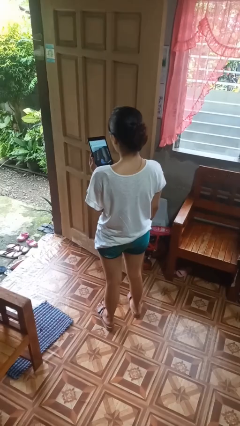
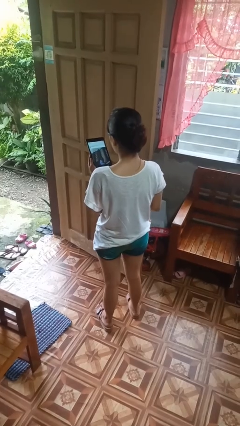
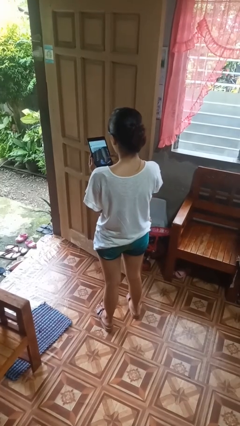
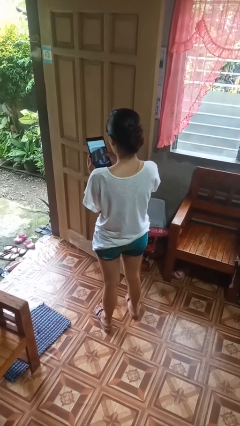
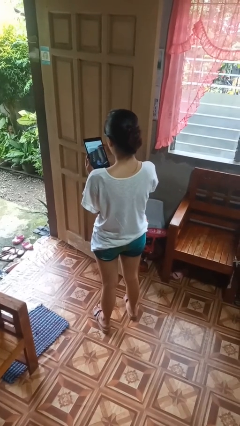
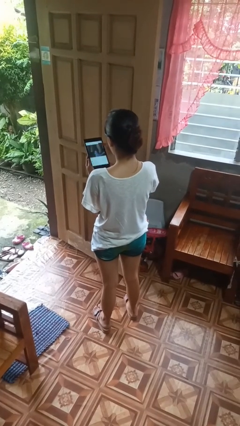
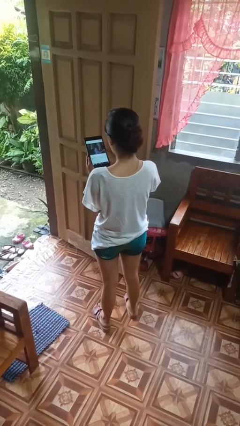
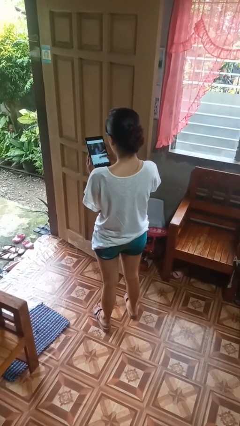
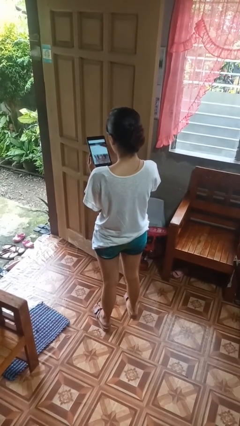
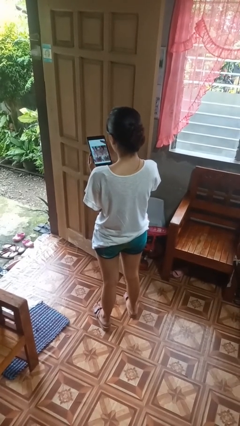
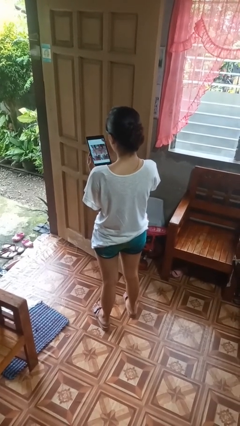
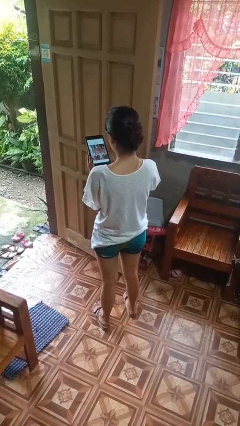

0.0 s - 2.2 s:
person interacts with tablet

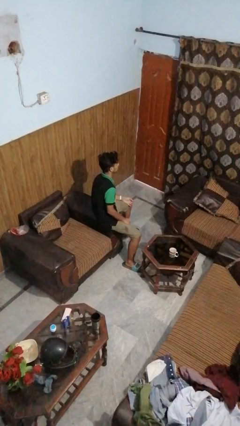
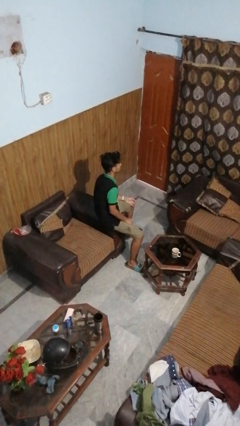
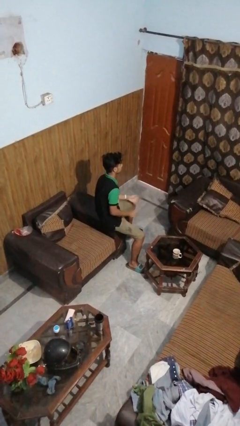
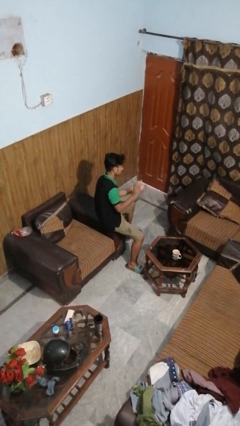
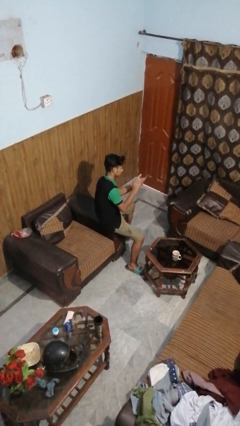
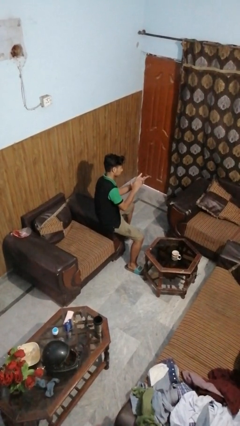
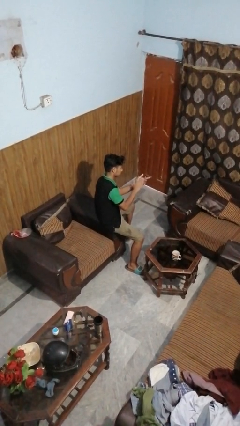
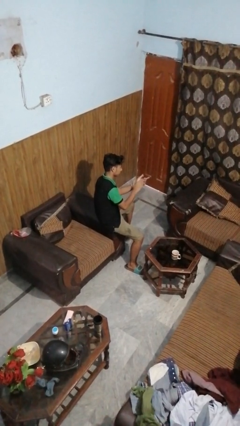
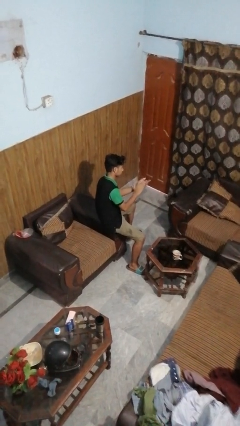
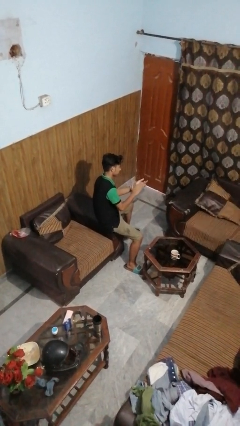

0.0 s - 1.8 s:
person claps hands

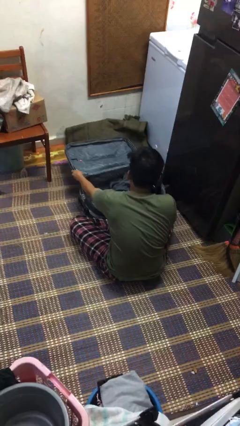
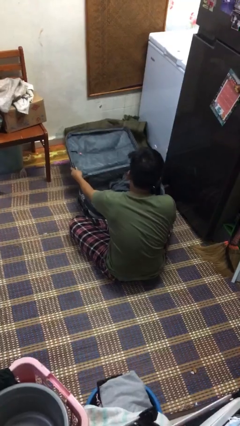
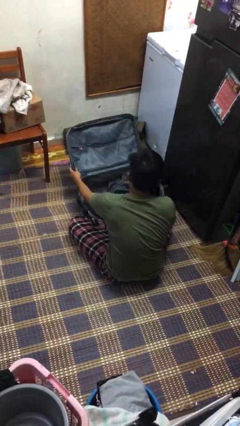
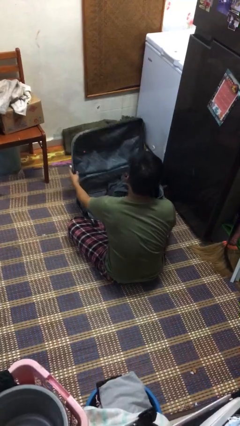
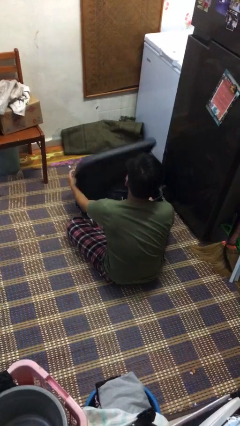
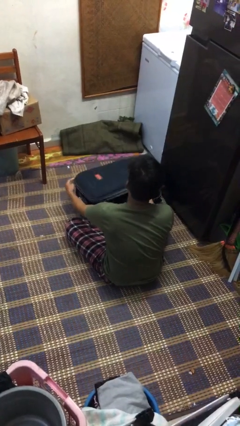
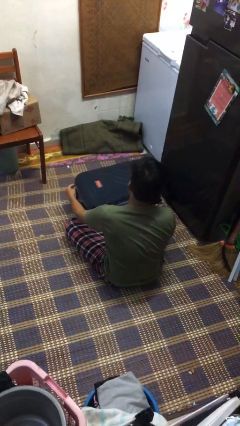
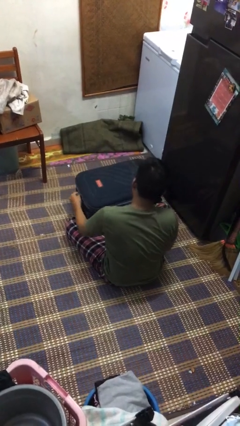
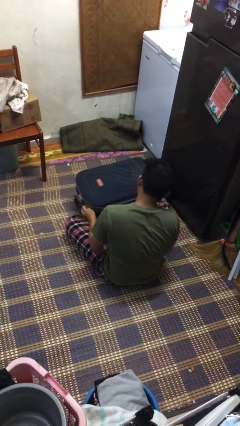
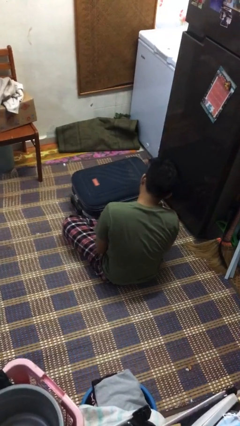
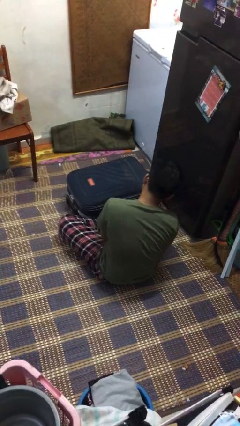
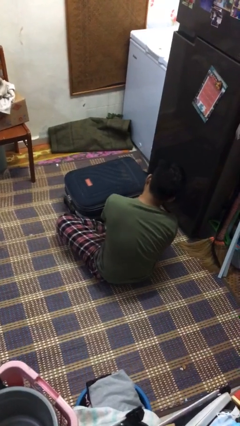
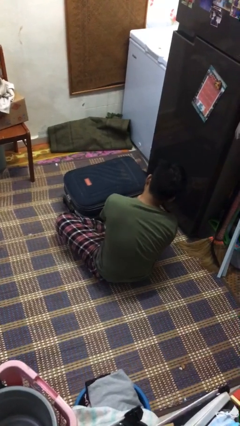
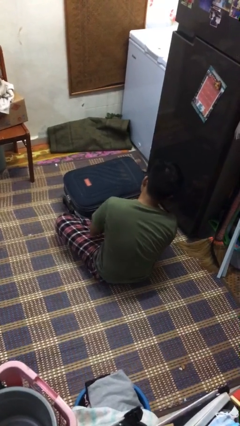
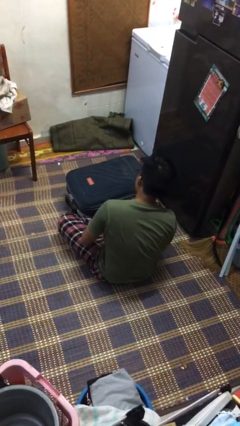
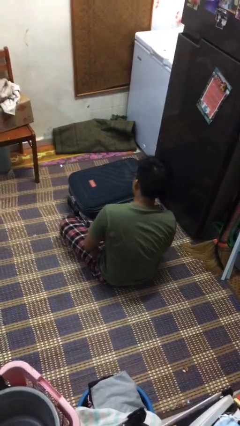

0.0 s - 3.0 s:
person closes suitcase

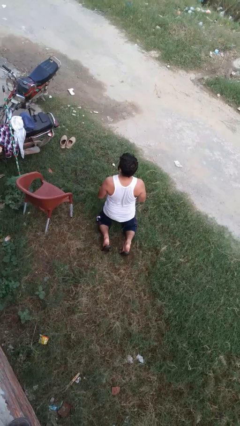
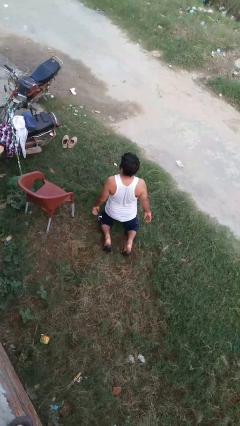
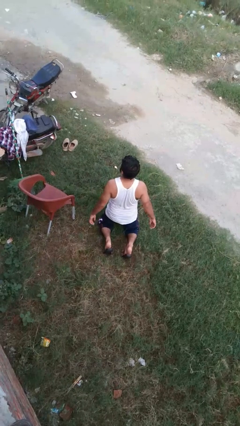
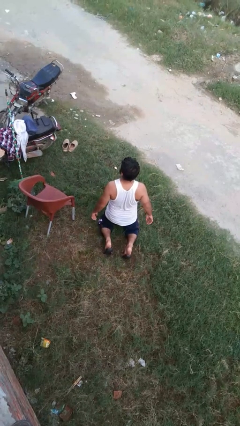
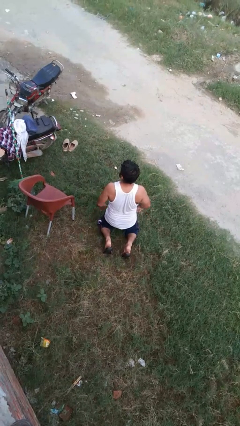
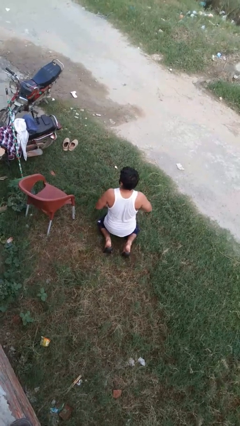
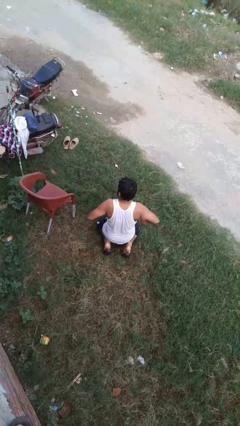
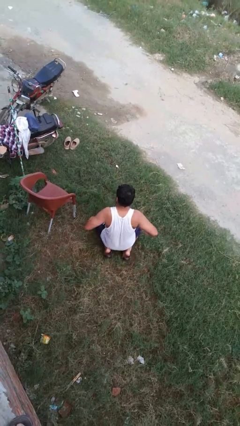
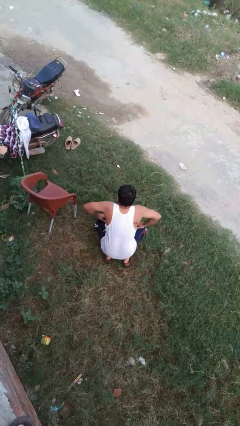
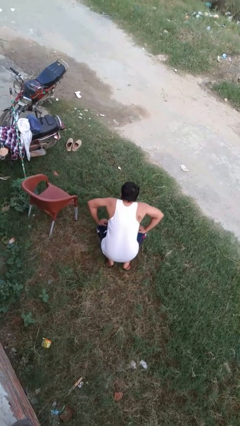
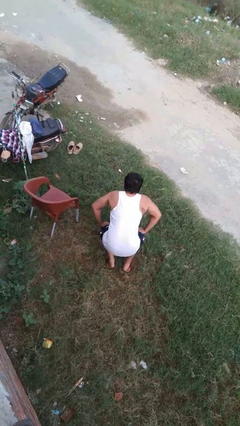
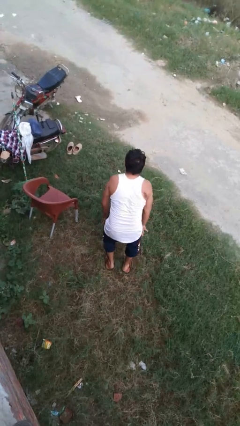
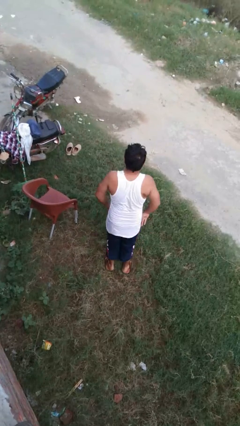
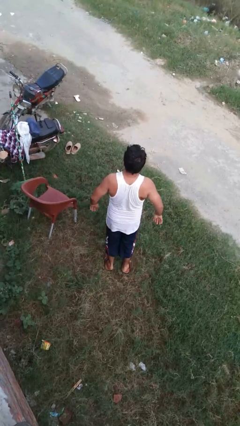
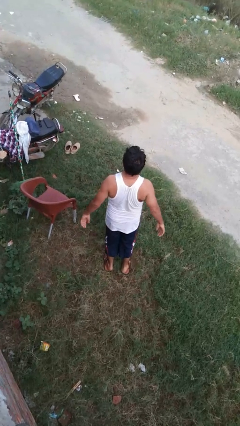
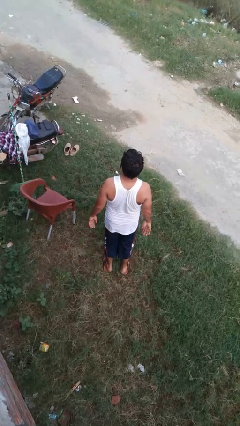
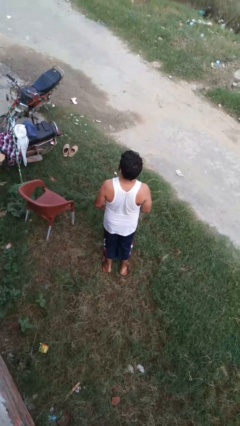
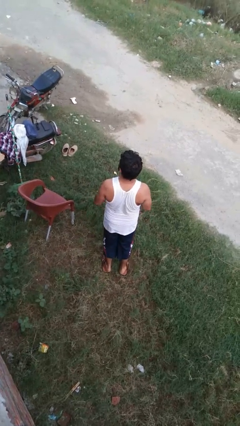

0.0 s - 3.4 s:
person stands up from floor

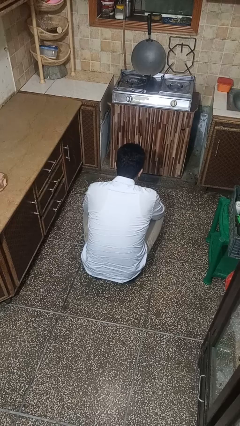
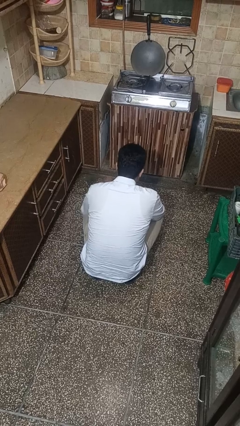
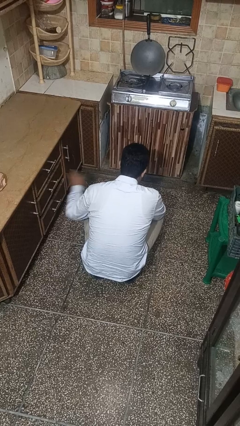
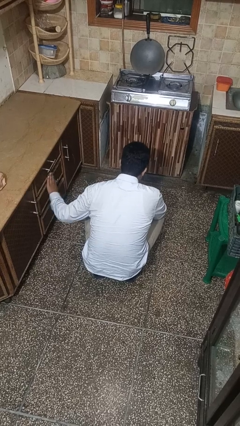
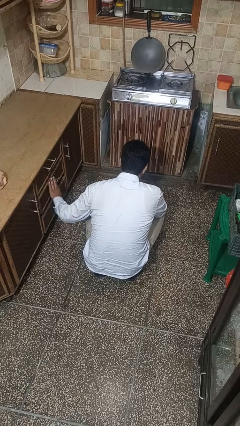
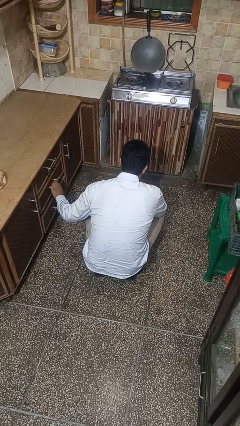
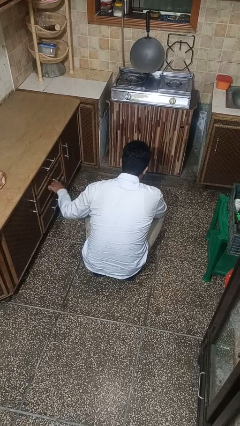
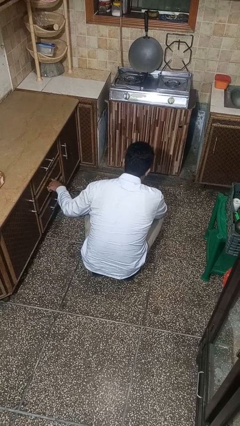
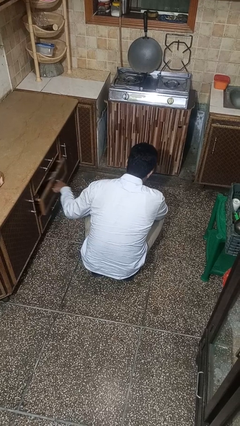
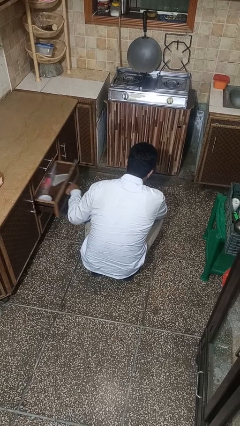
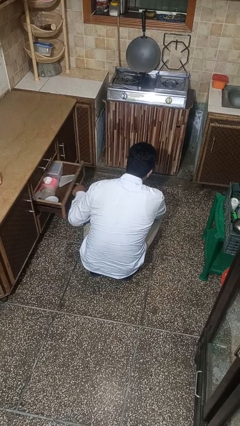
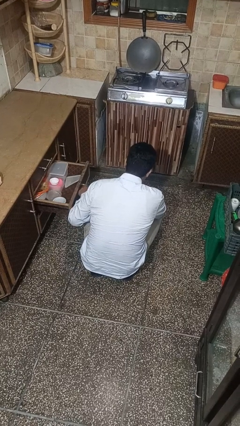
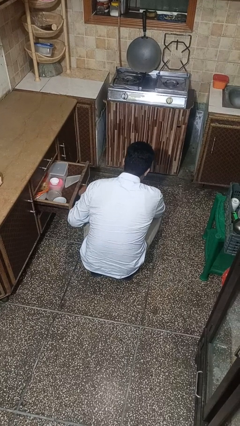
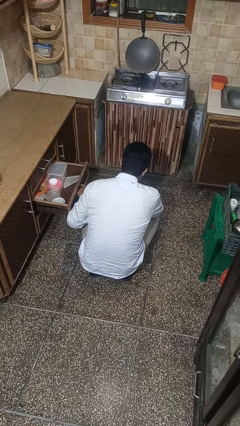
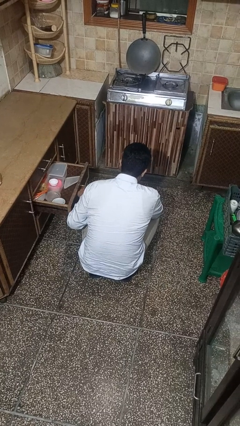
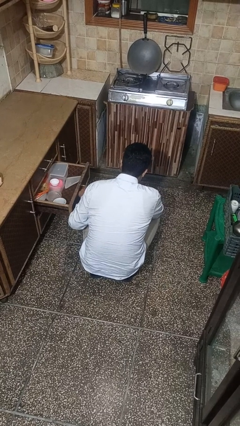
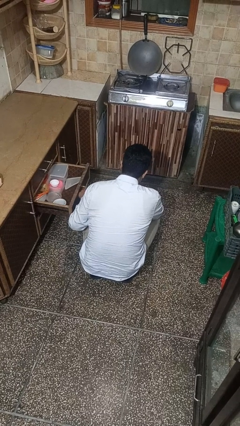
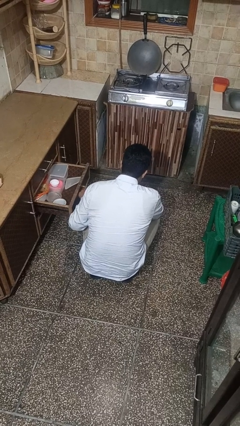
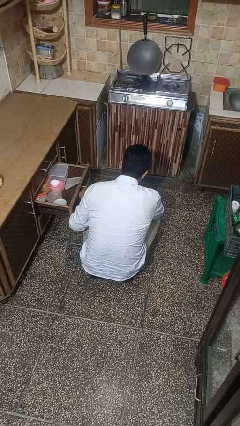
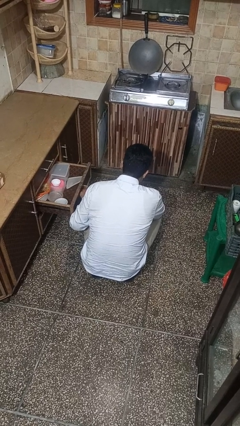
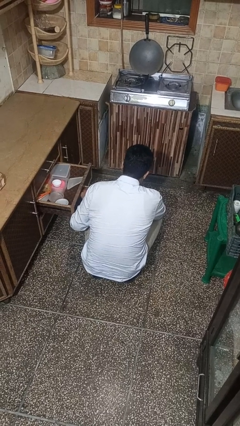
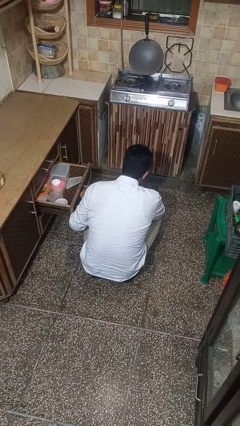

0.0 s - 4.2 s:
person opens kitchen drawer

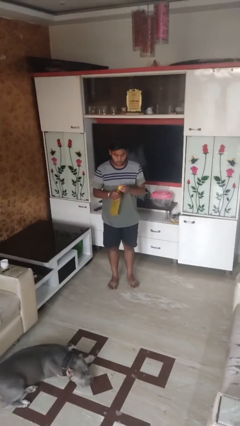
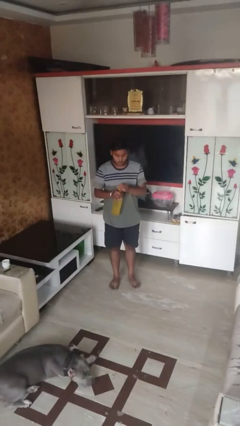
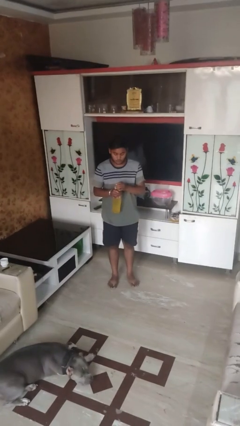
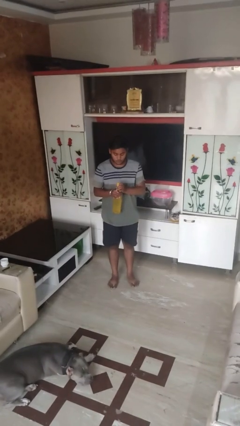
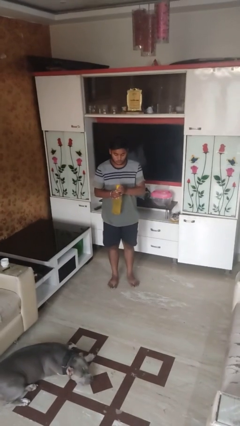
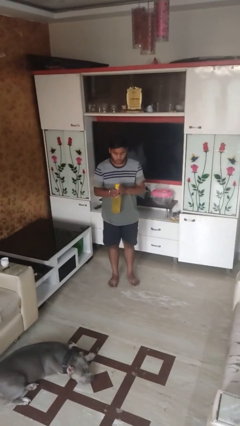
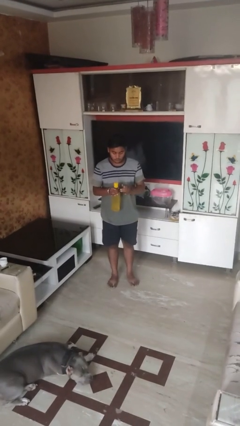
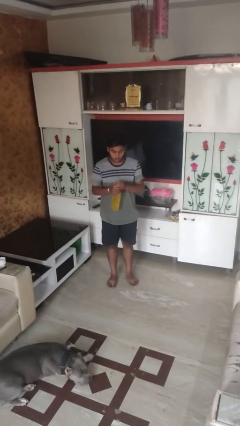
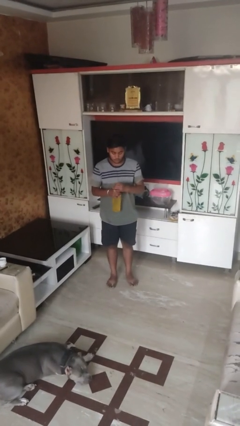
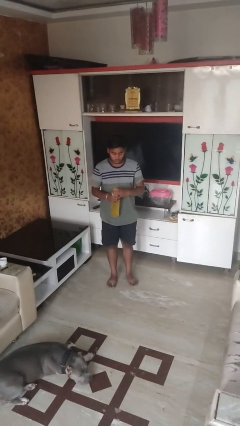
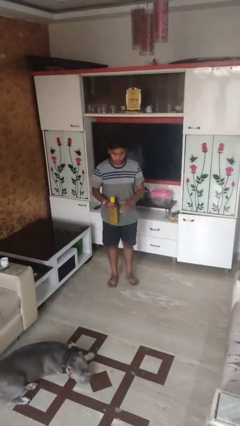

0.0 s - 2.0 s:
person screws lid to bottle

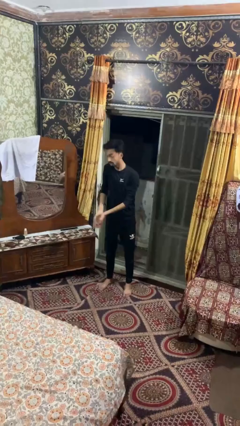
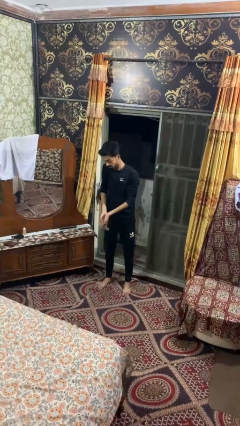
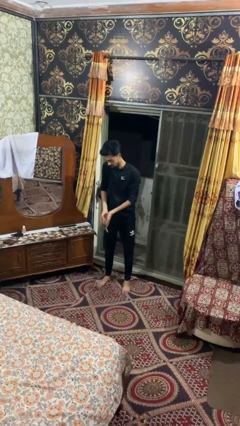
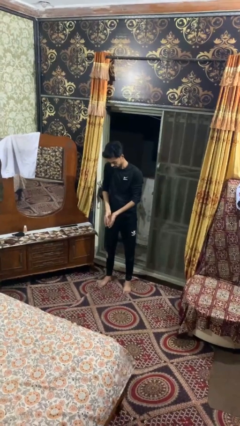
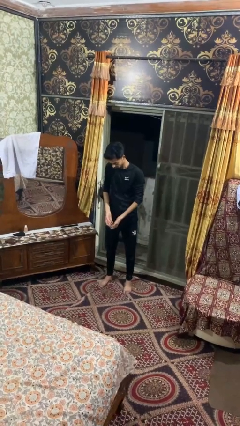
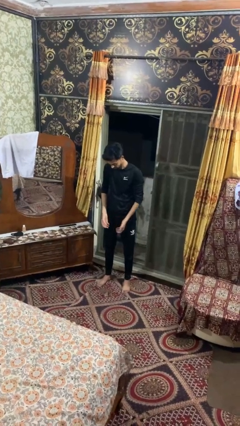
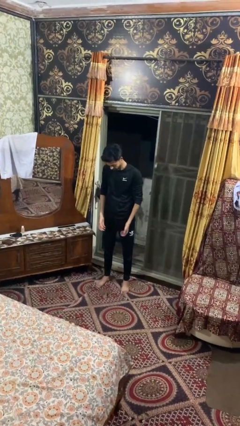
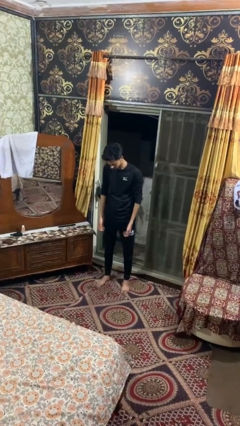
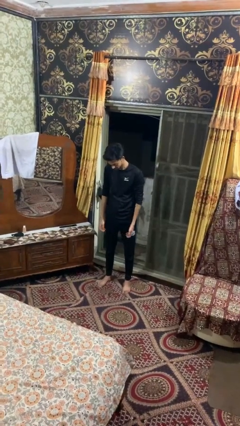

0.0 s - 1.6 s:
person catches dropped object
